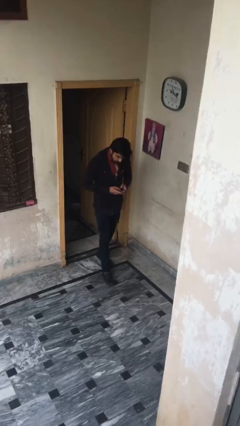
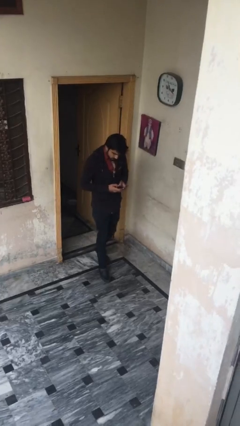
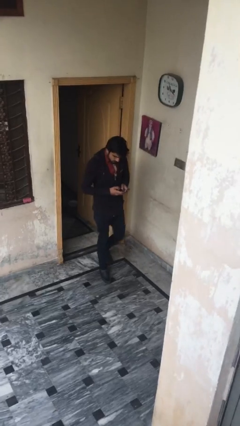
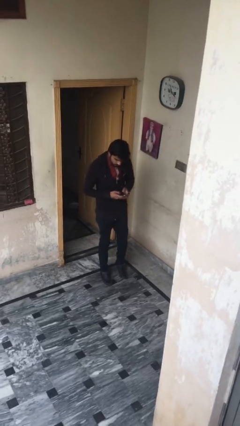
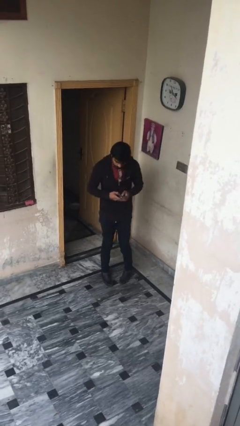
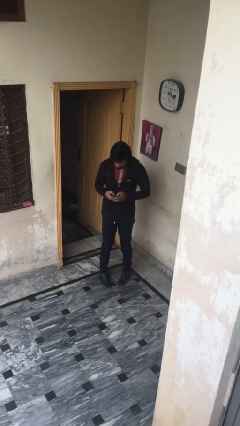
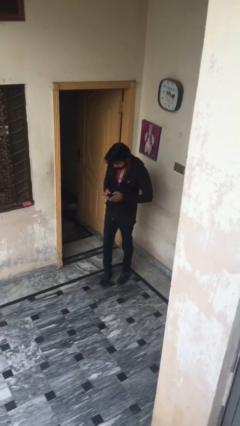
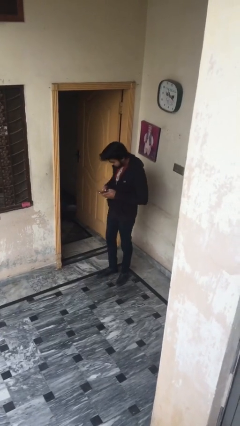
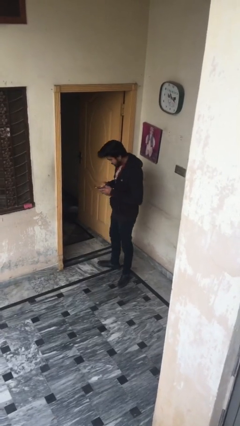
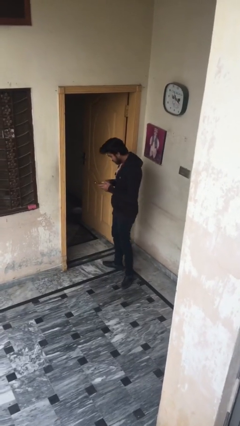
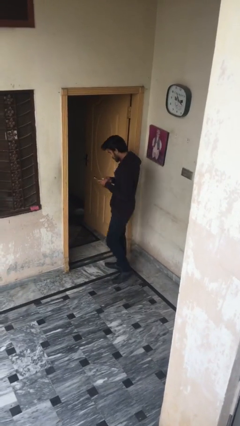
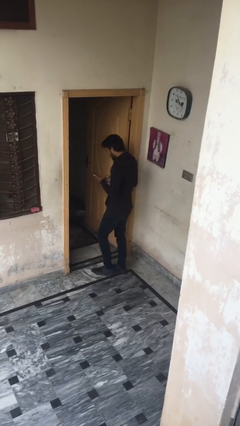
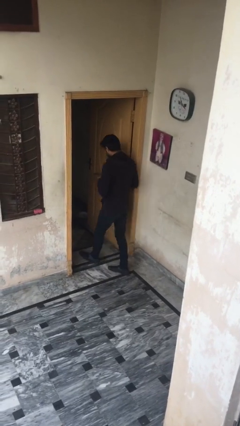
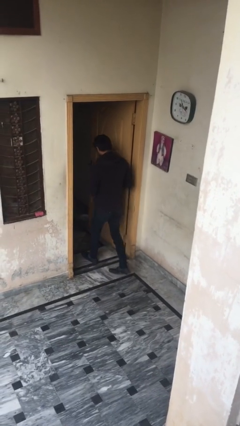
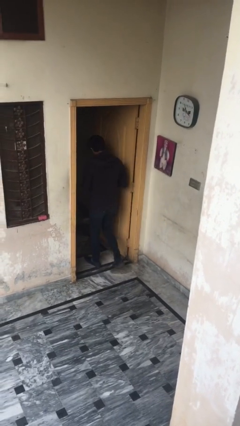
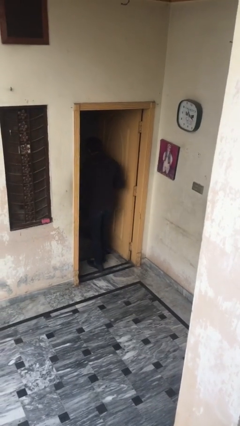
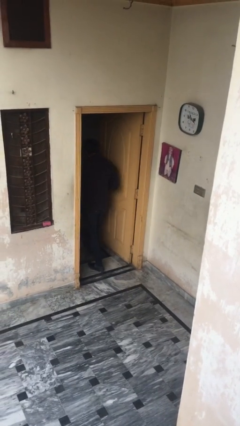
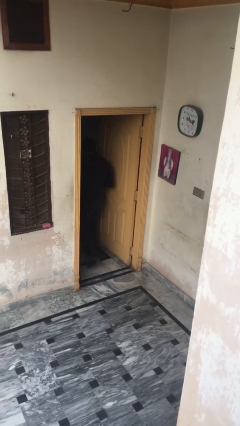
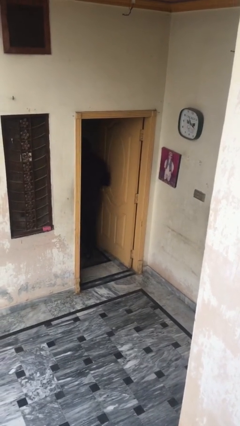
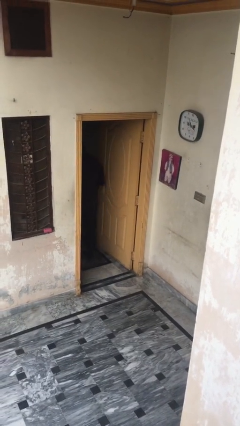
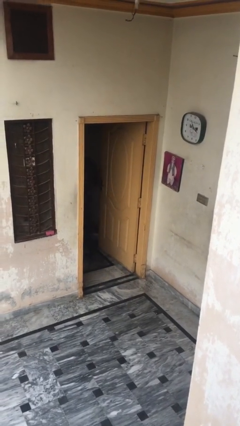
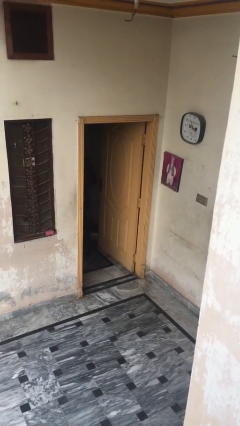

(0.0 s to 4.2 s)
person exits scene through structure

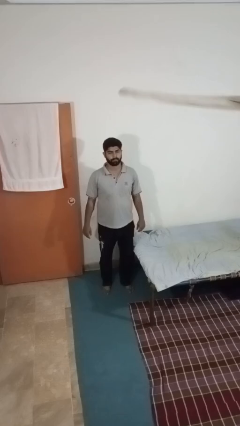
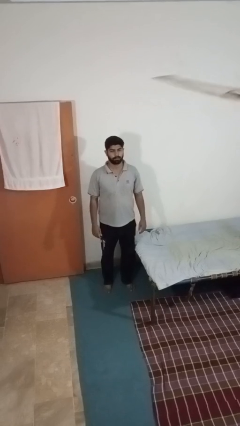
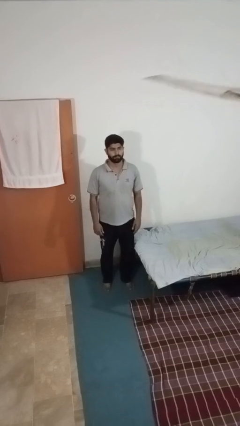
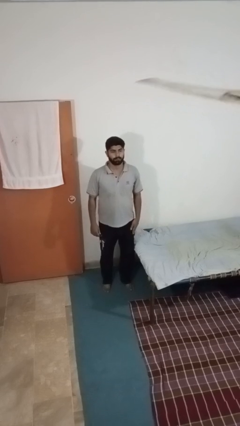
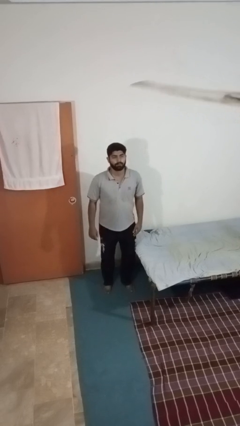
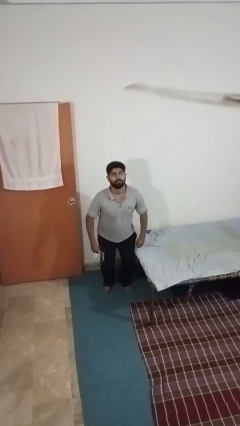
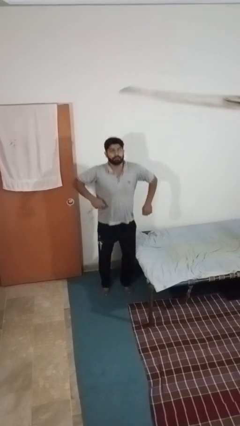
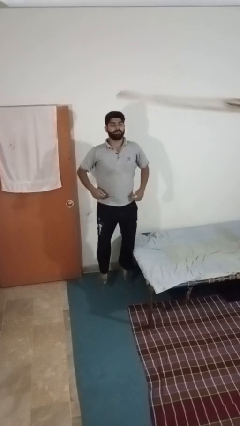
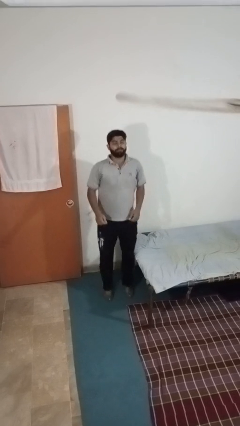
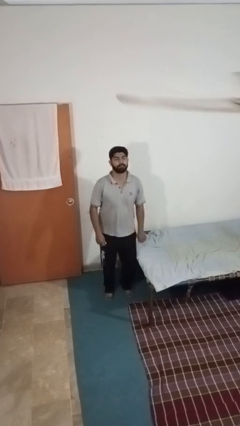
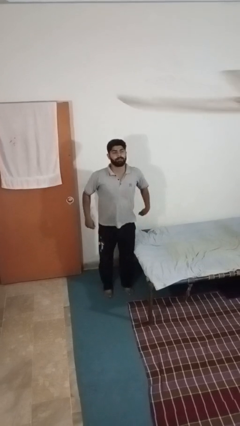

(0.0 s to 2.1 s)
person jumps

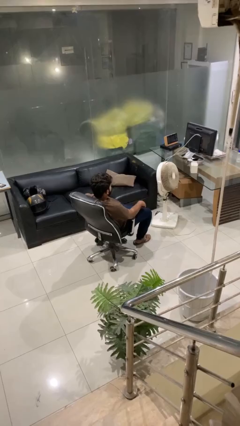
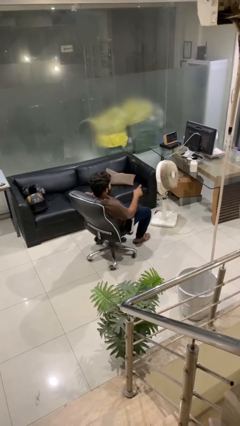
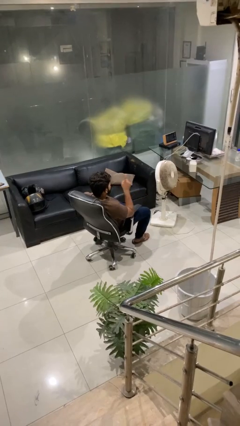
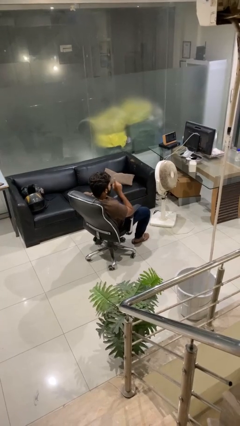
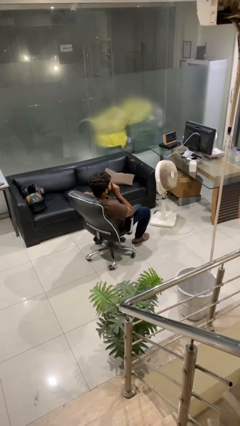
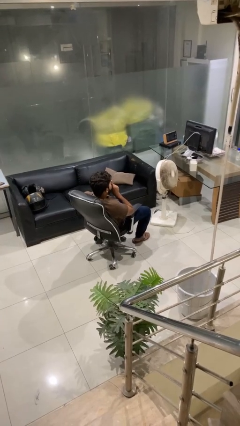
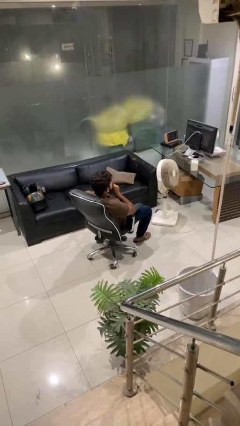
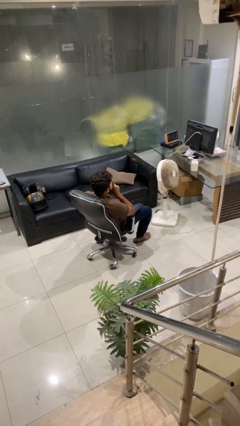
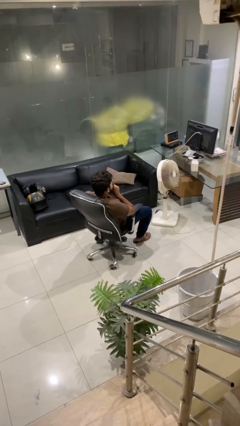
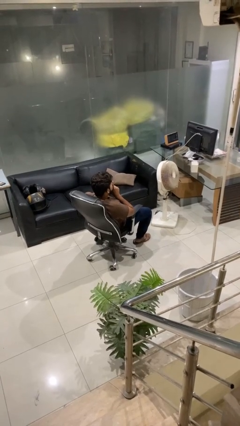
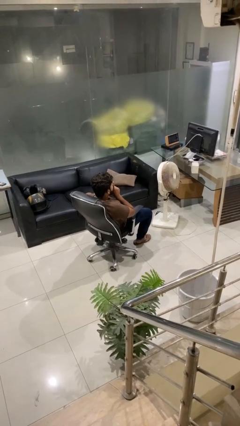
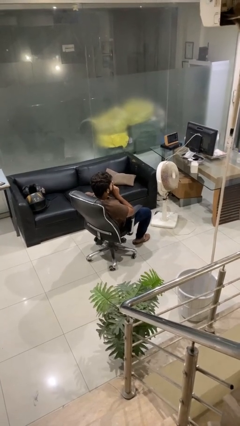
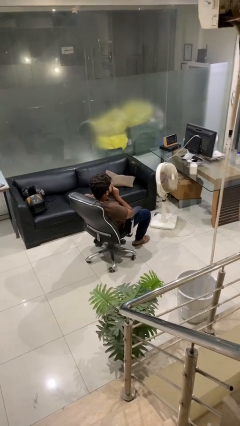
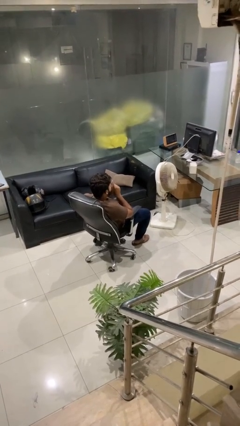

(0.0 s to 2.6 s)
person gestures be quiet

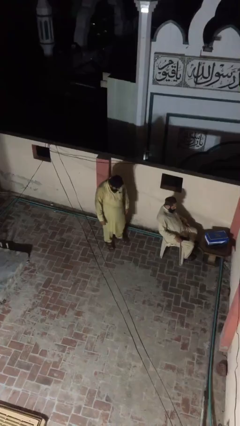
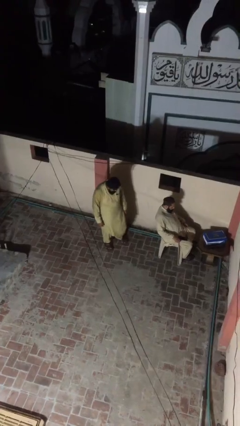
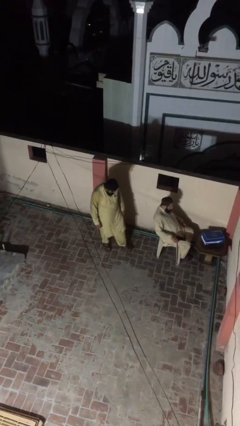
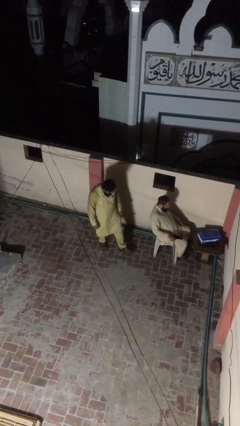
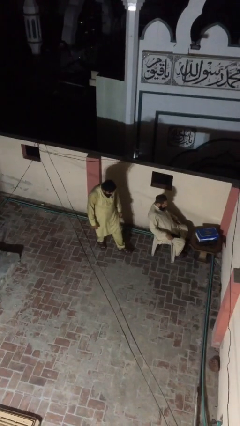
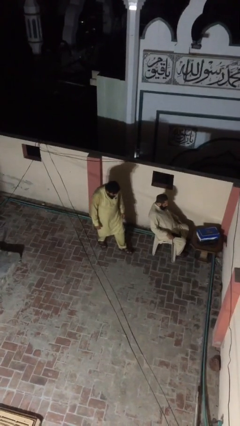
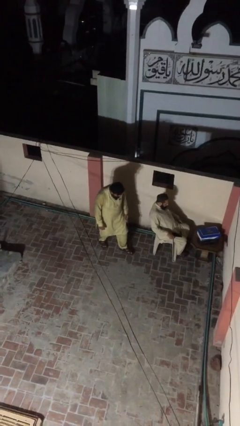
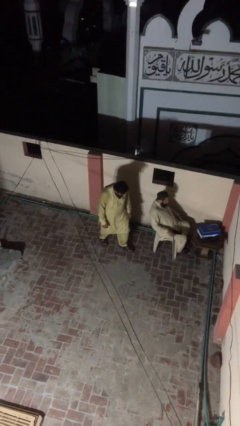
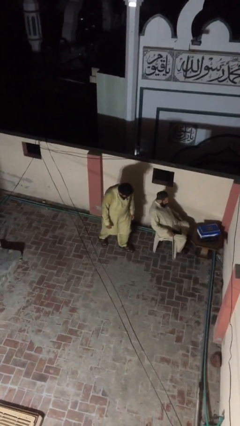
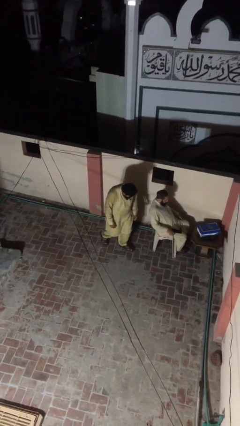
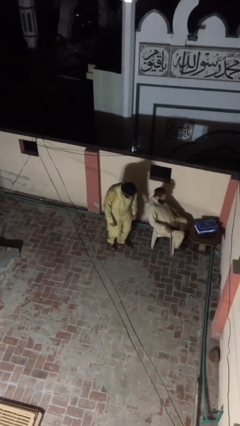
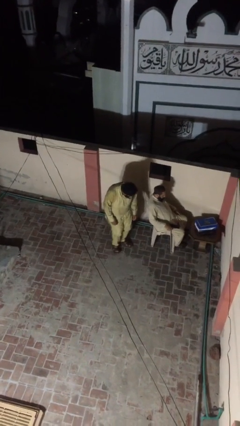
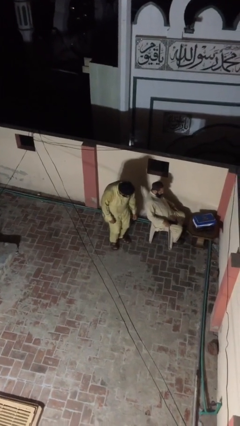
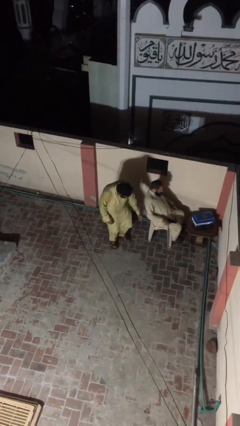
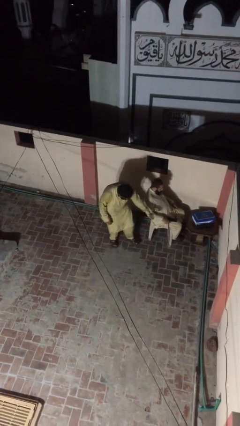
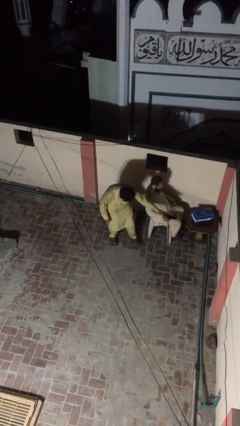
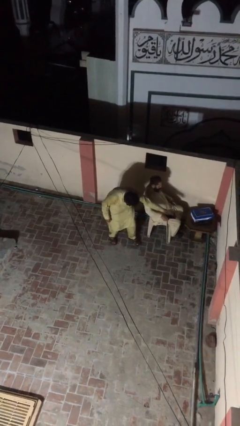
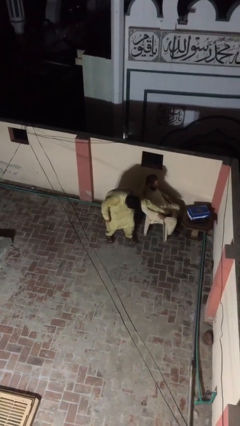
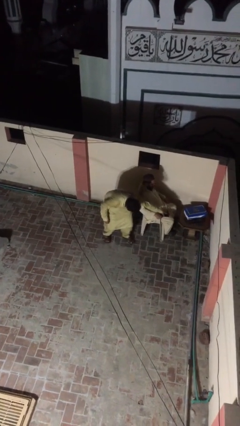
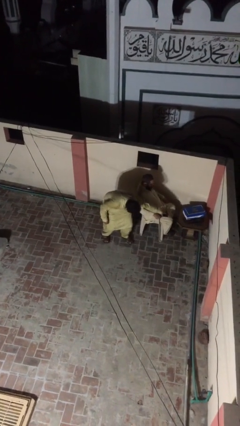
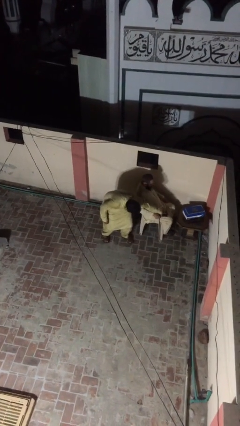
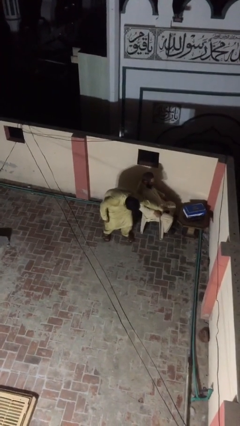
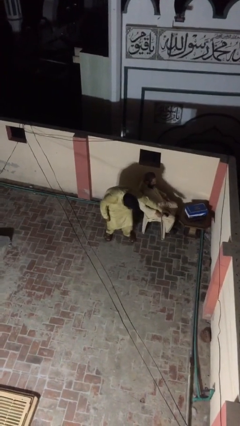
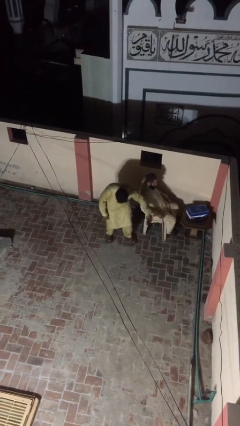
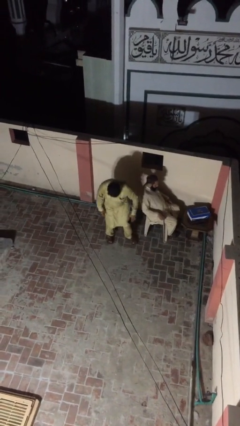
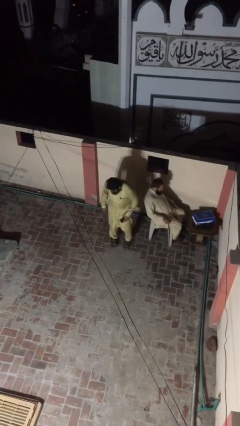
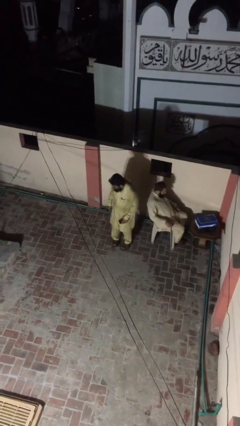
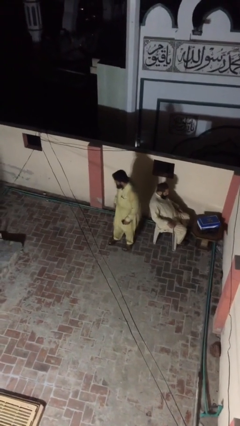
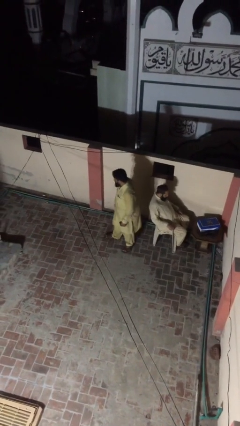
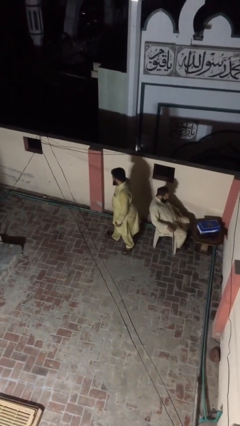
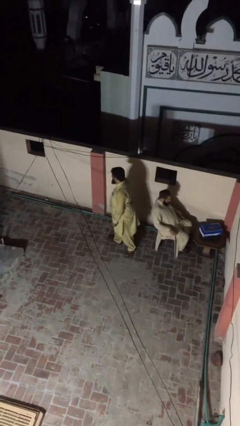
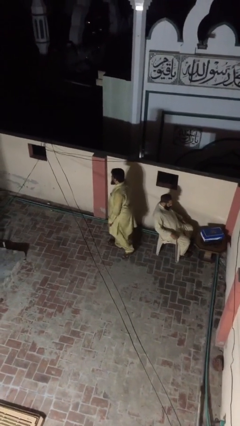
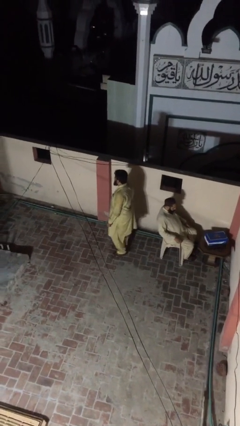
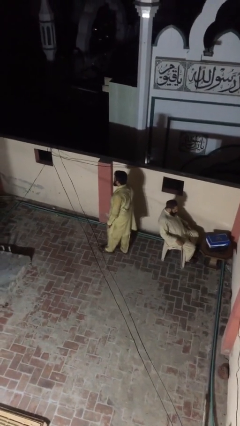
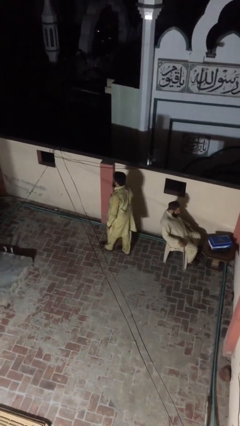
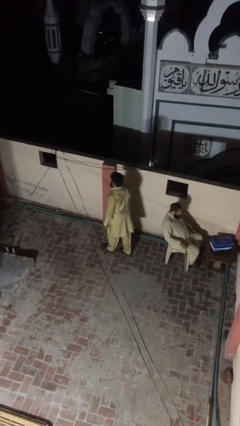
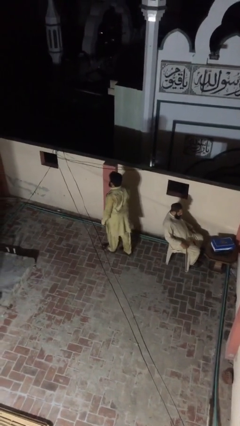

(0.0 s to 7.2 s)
person steals object from person

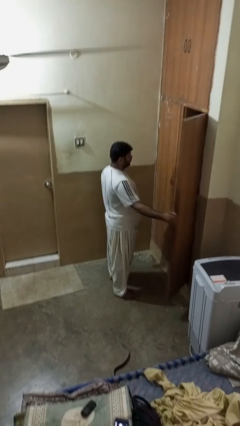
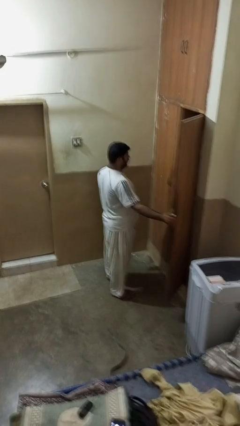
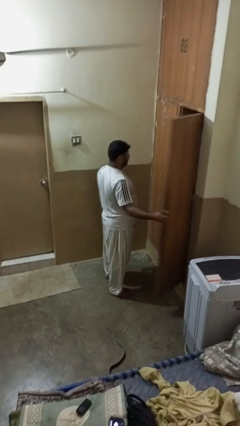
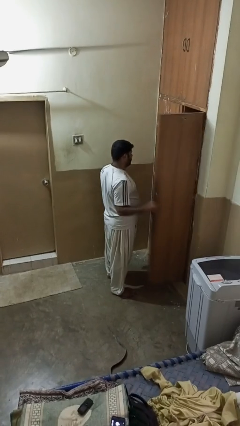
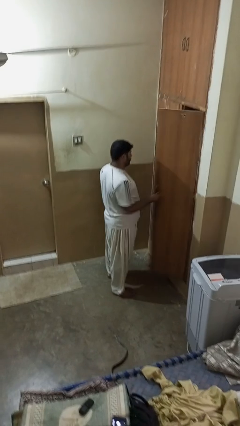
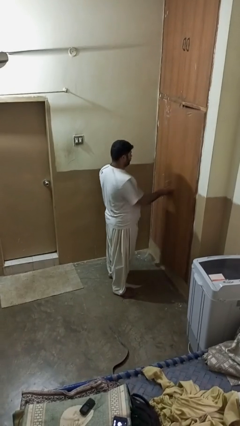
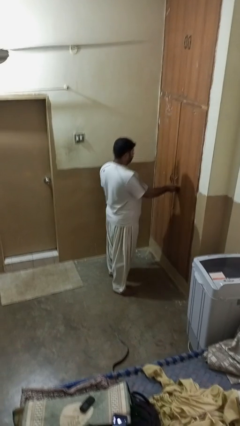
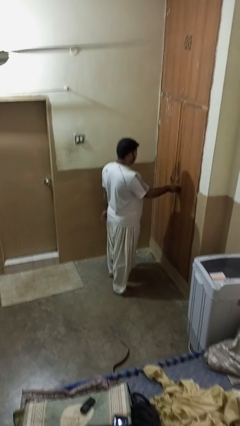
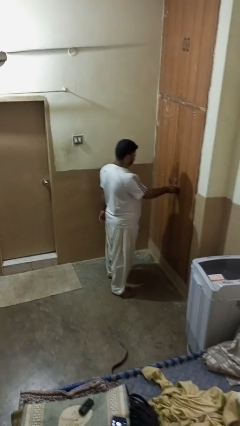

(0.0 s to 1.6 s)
person closes closet door
